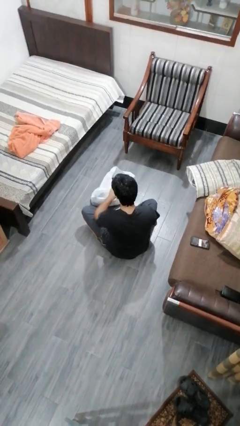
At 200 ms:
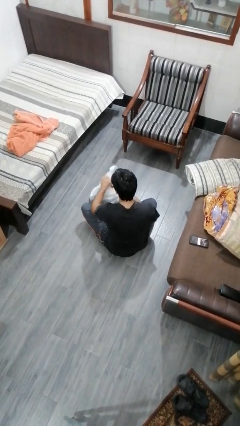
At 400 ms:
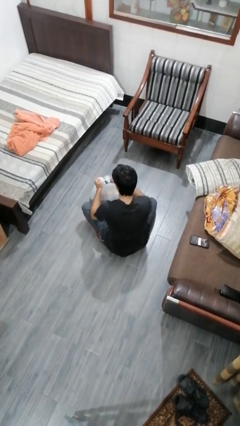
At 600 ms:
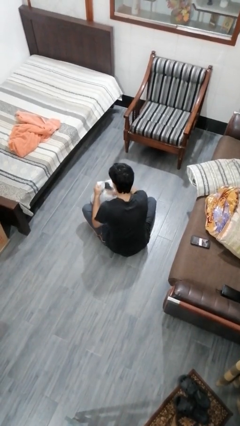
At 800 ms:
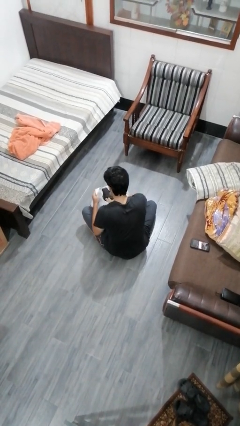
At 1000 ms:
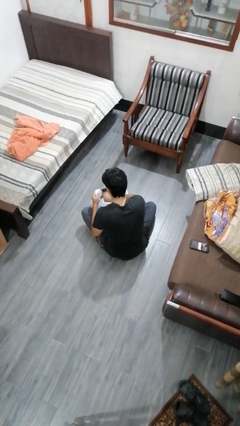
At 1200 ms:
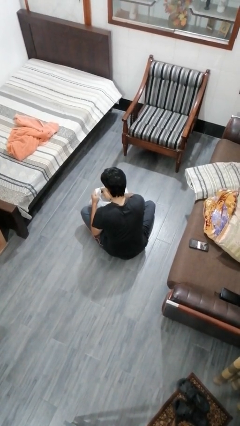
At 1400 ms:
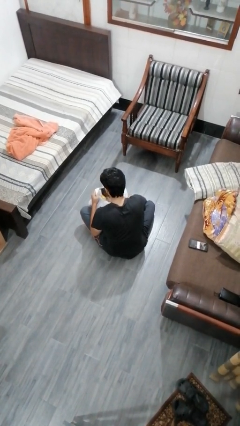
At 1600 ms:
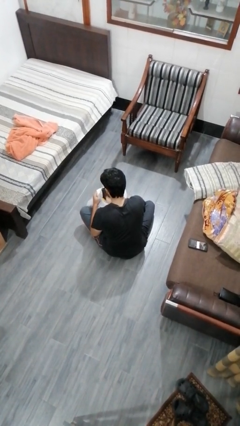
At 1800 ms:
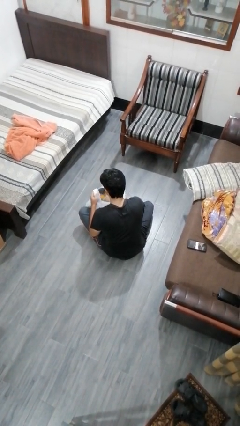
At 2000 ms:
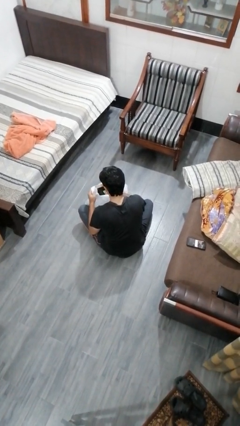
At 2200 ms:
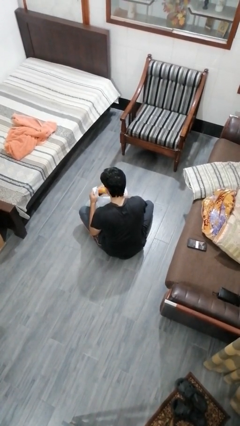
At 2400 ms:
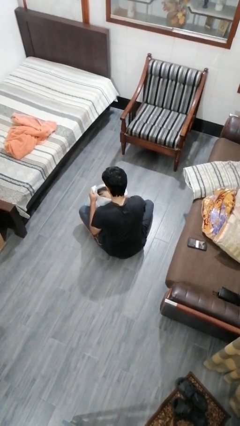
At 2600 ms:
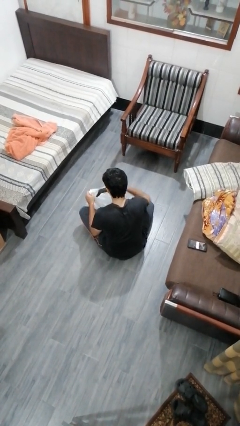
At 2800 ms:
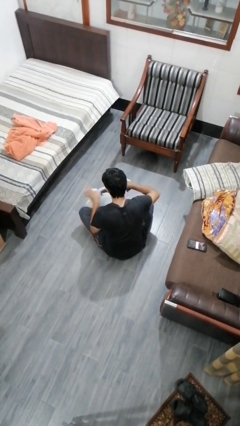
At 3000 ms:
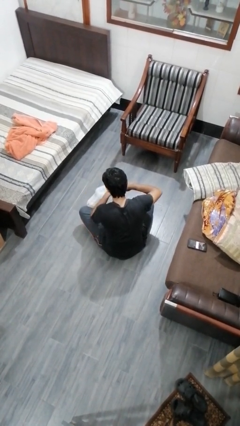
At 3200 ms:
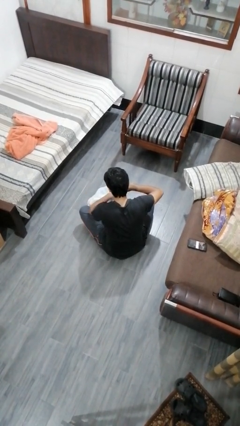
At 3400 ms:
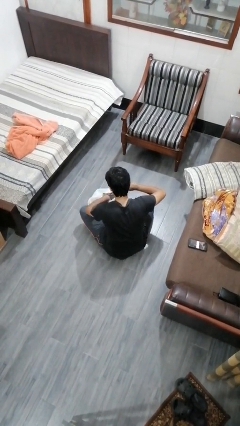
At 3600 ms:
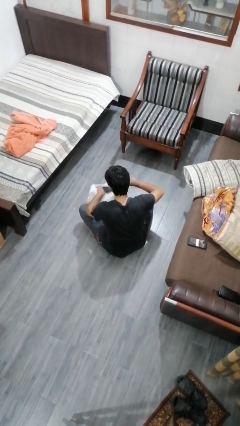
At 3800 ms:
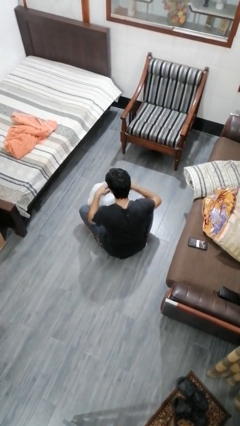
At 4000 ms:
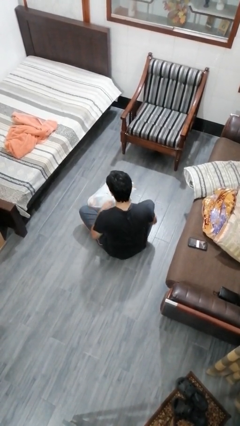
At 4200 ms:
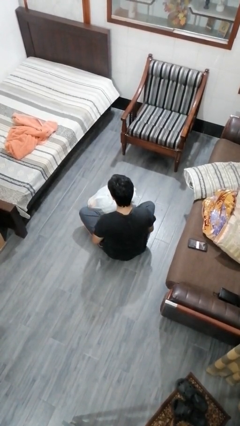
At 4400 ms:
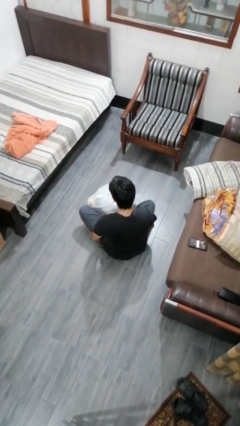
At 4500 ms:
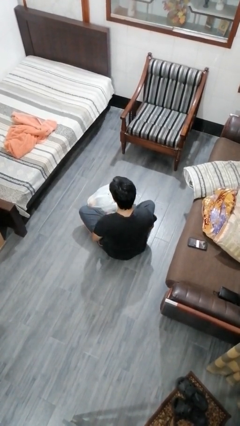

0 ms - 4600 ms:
person searches in bag

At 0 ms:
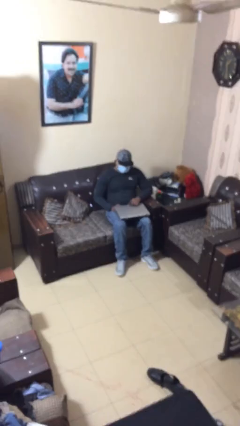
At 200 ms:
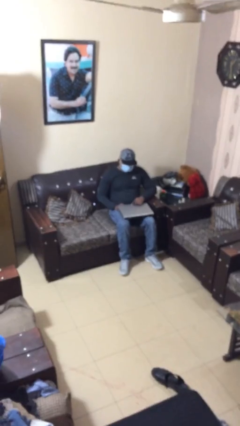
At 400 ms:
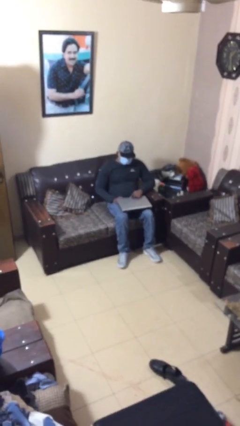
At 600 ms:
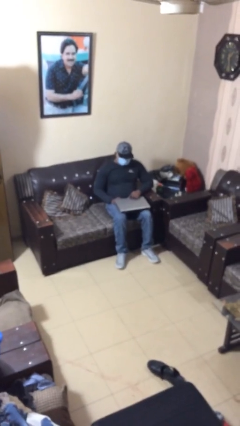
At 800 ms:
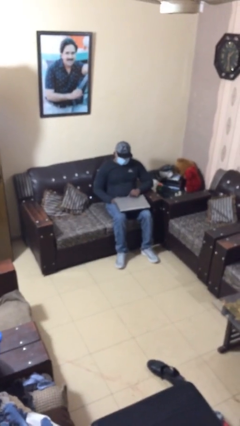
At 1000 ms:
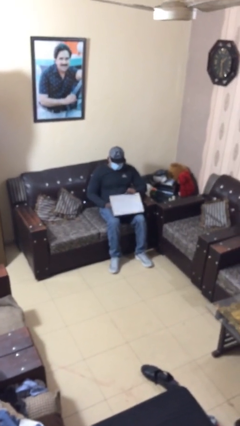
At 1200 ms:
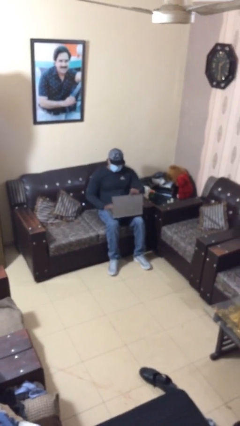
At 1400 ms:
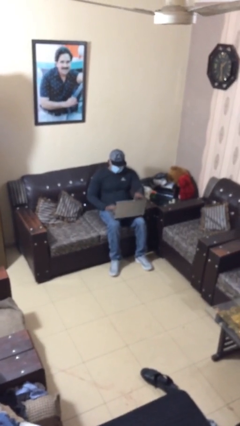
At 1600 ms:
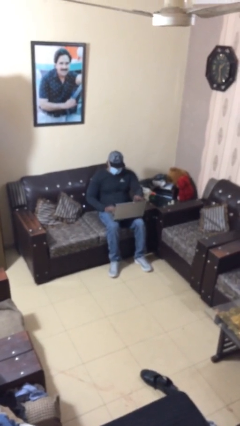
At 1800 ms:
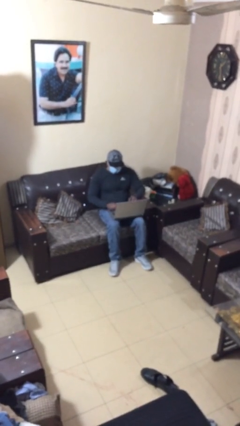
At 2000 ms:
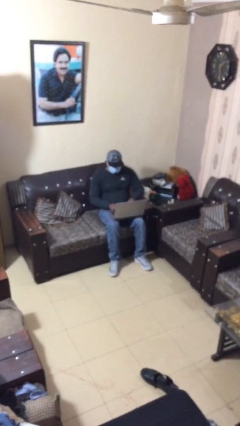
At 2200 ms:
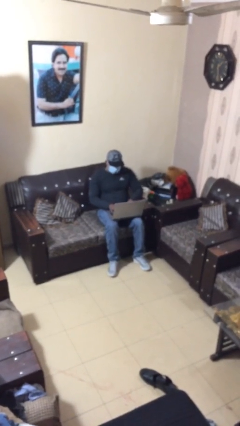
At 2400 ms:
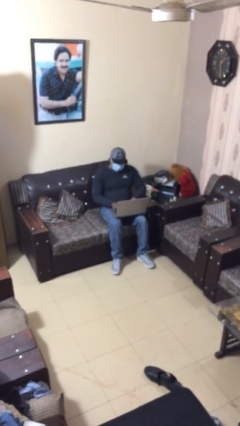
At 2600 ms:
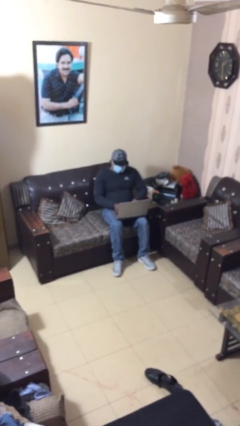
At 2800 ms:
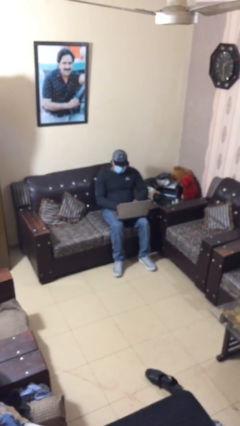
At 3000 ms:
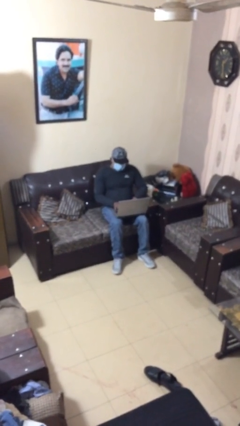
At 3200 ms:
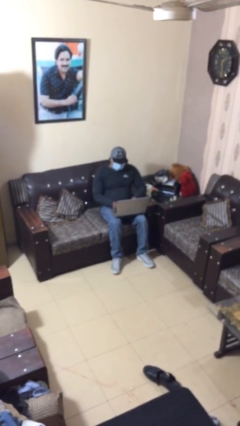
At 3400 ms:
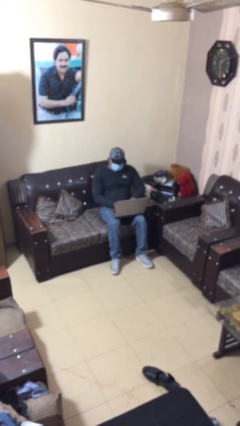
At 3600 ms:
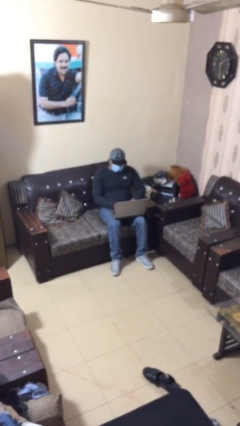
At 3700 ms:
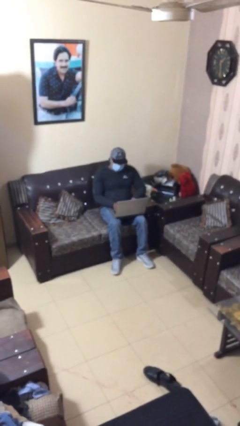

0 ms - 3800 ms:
person interacts with laptop

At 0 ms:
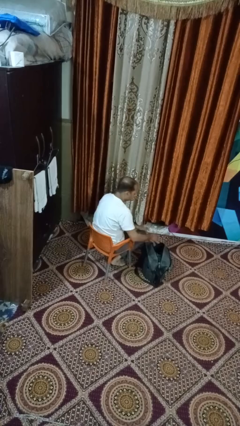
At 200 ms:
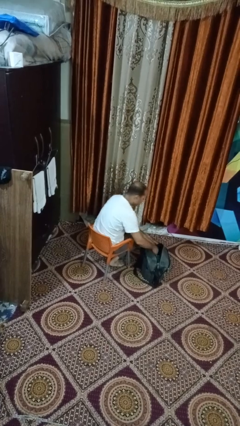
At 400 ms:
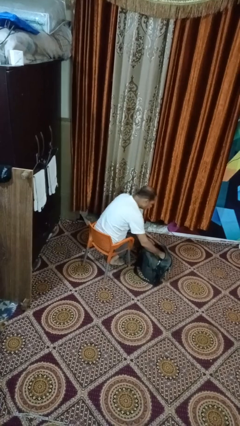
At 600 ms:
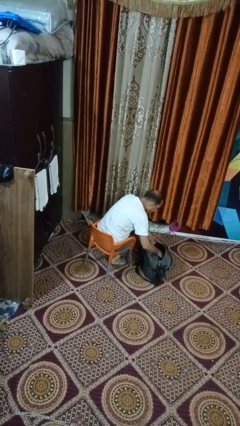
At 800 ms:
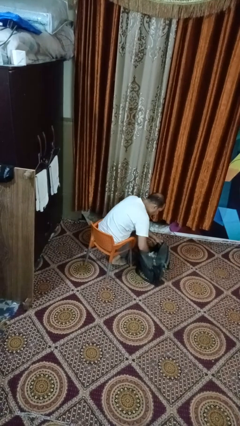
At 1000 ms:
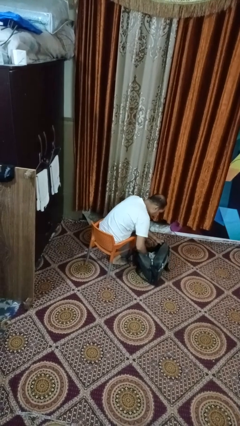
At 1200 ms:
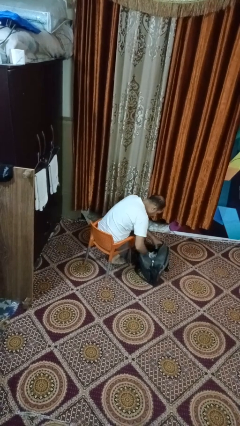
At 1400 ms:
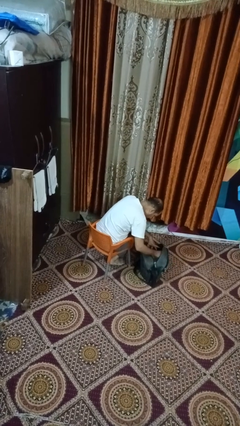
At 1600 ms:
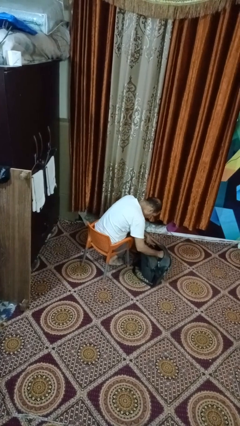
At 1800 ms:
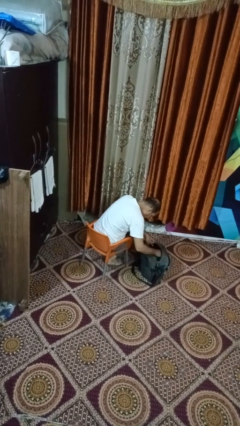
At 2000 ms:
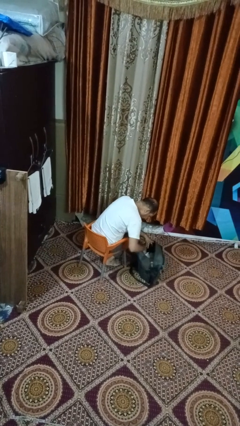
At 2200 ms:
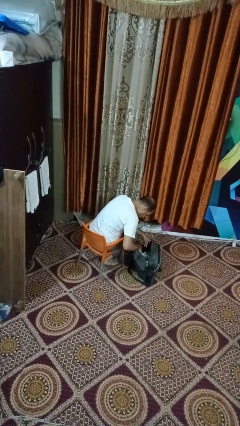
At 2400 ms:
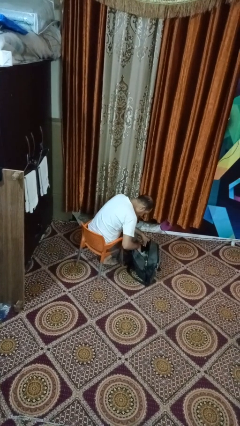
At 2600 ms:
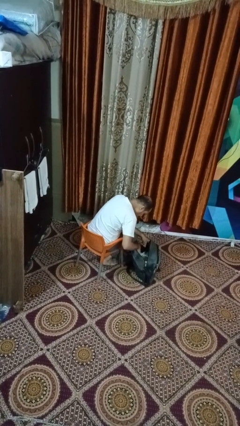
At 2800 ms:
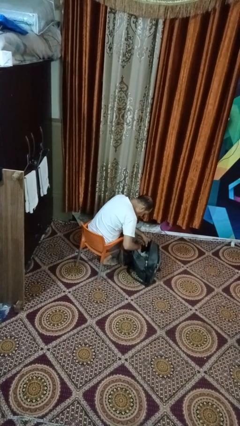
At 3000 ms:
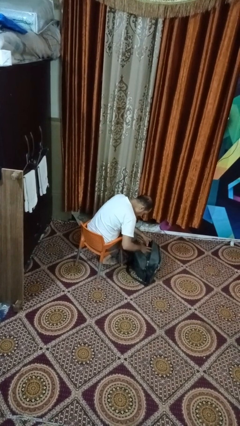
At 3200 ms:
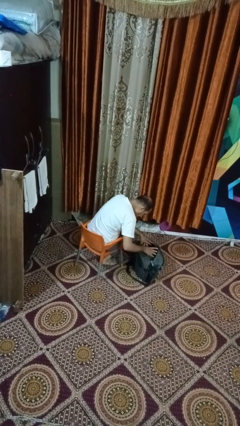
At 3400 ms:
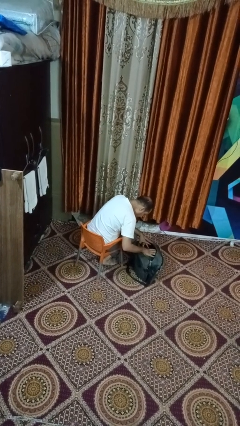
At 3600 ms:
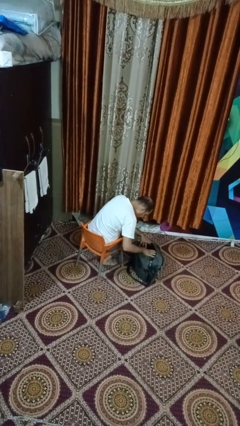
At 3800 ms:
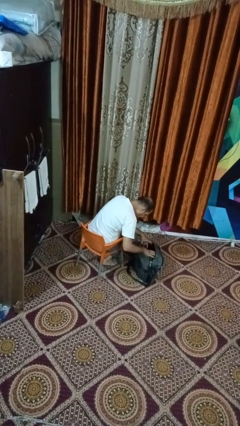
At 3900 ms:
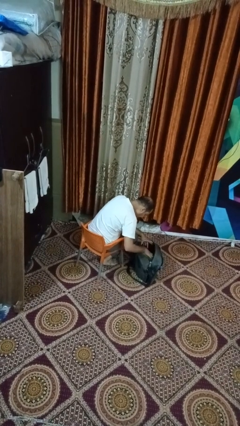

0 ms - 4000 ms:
person searches in backpack

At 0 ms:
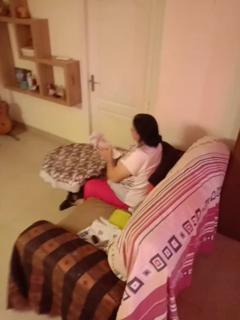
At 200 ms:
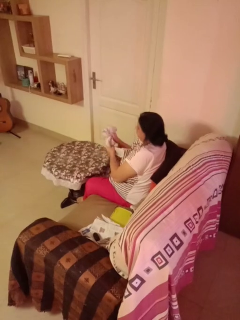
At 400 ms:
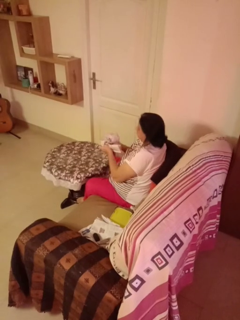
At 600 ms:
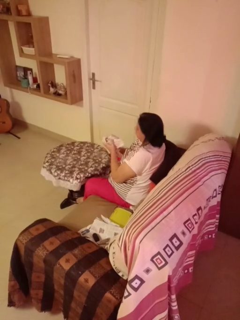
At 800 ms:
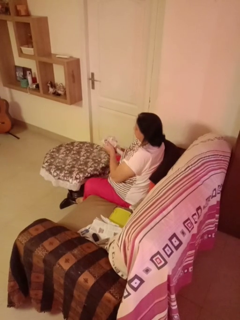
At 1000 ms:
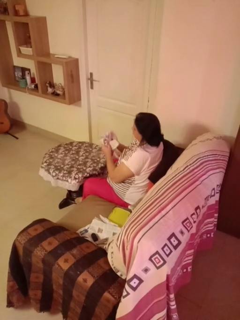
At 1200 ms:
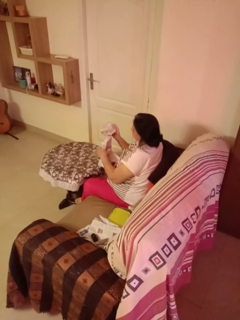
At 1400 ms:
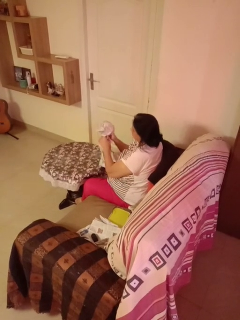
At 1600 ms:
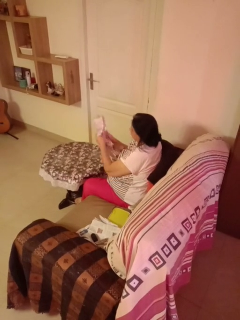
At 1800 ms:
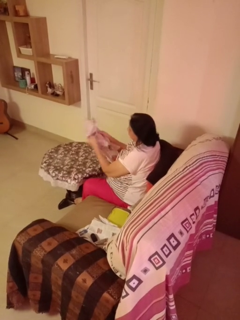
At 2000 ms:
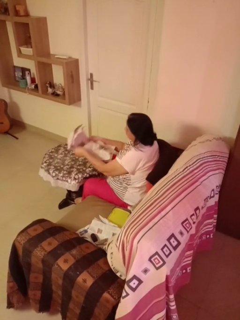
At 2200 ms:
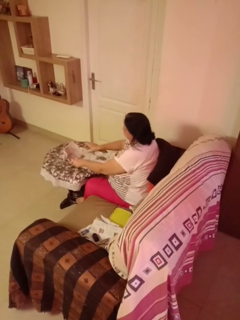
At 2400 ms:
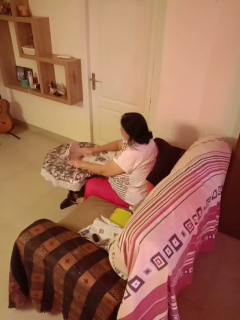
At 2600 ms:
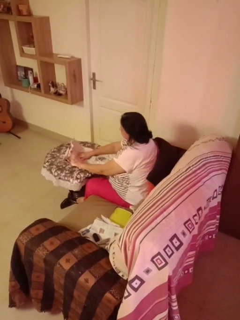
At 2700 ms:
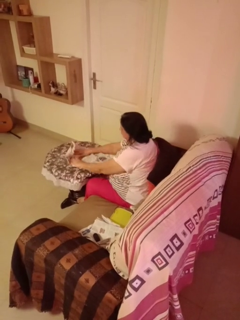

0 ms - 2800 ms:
person crumples paper

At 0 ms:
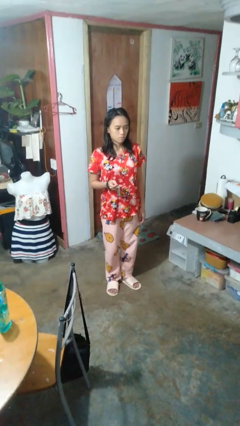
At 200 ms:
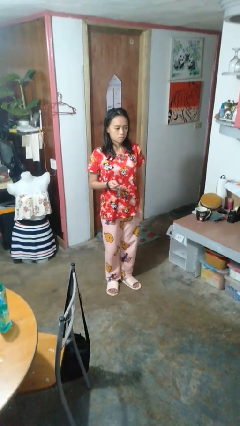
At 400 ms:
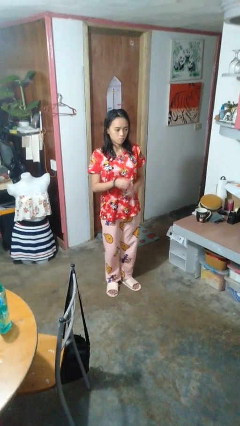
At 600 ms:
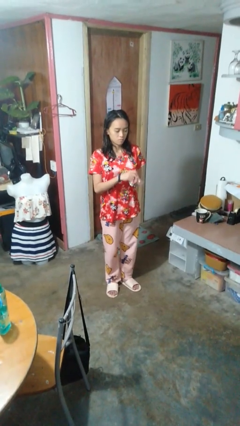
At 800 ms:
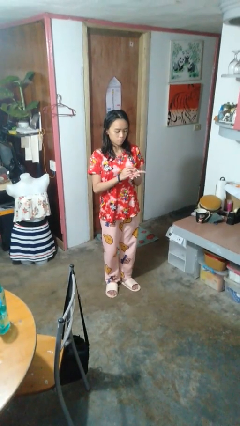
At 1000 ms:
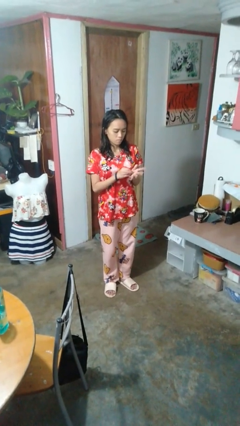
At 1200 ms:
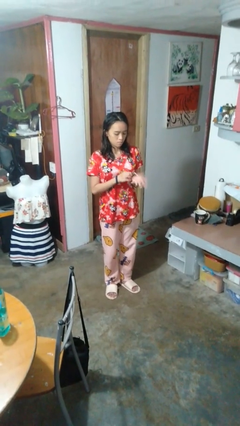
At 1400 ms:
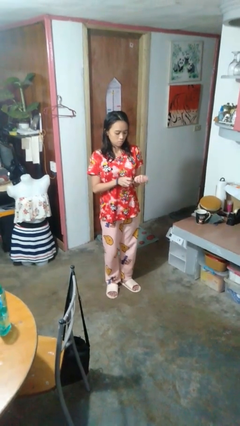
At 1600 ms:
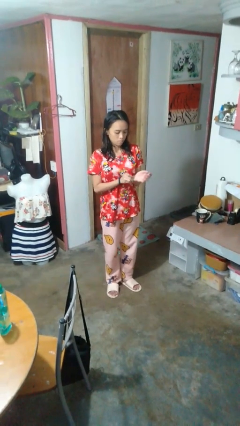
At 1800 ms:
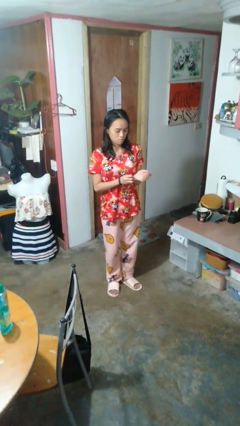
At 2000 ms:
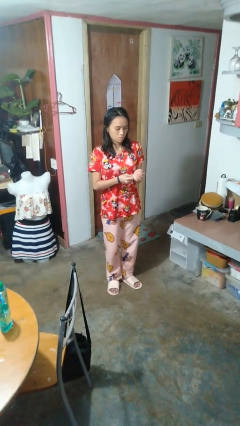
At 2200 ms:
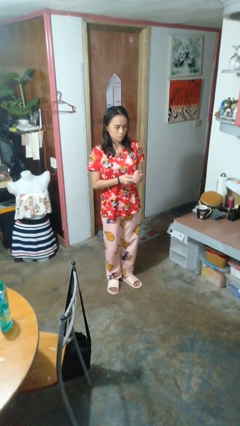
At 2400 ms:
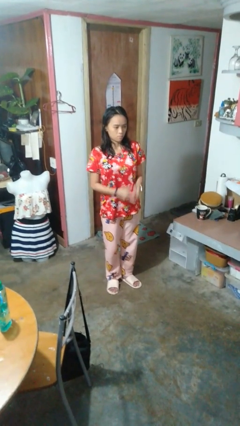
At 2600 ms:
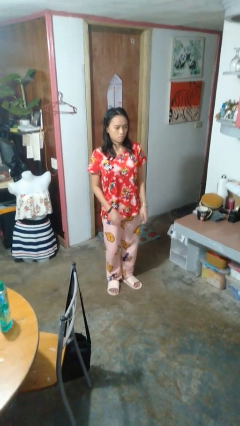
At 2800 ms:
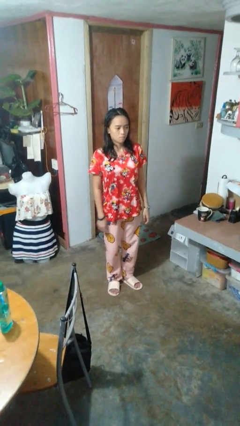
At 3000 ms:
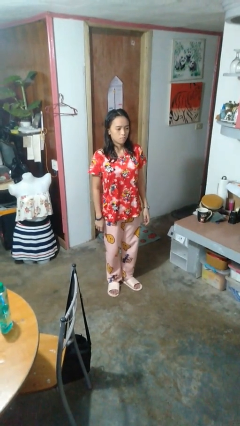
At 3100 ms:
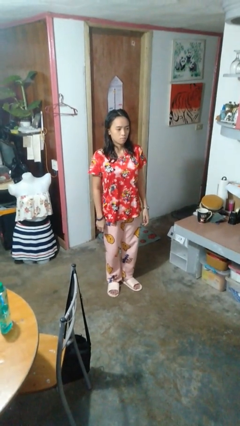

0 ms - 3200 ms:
person puts on wristwatch

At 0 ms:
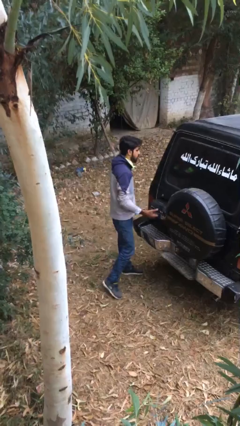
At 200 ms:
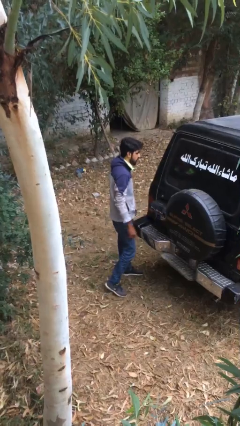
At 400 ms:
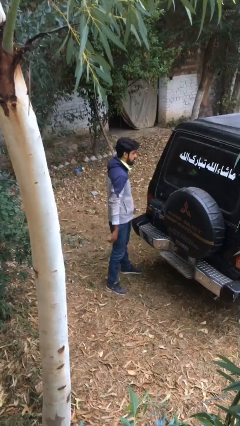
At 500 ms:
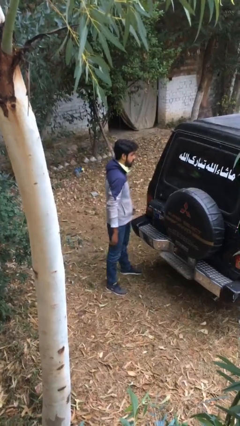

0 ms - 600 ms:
person closes car trunk
